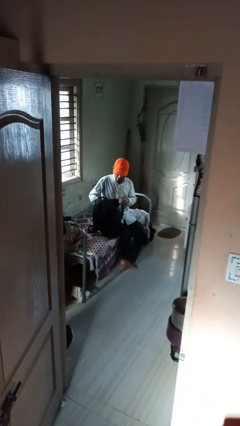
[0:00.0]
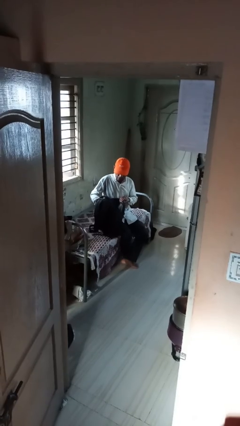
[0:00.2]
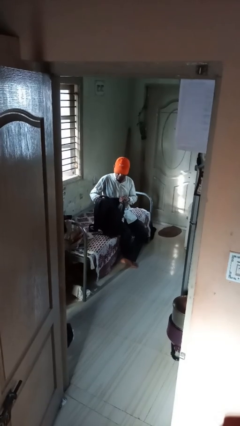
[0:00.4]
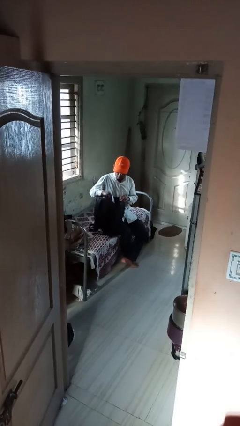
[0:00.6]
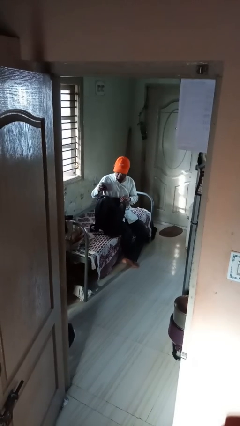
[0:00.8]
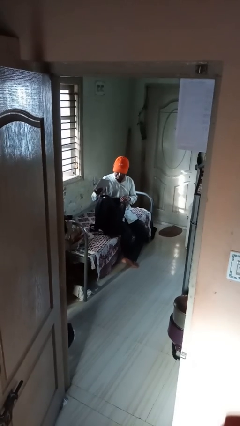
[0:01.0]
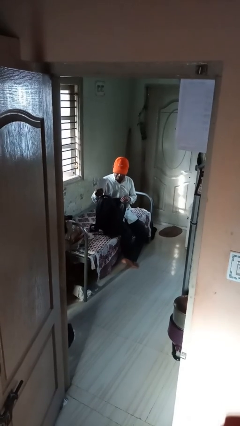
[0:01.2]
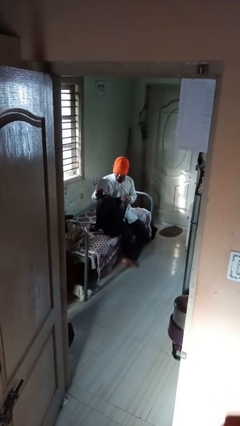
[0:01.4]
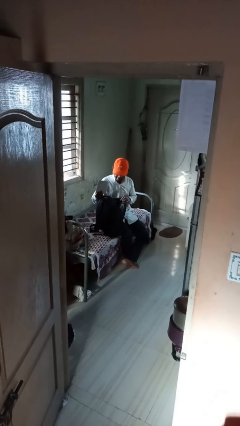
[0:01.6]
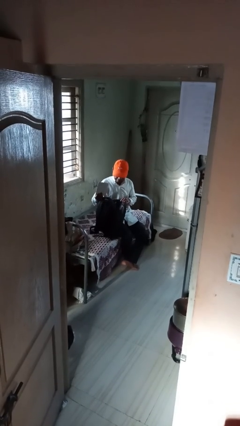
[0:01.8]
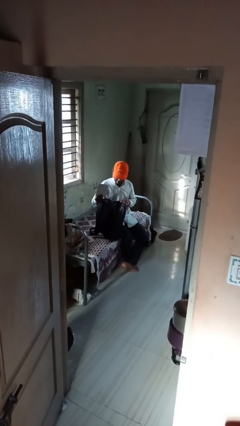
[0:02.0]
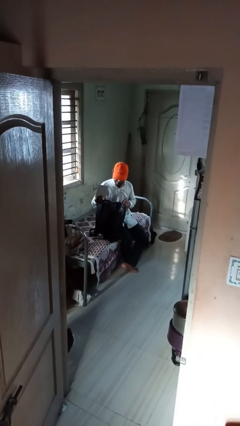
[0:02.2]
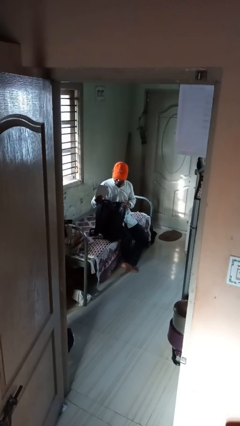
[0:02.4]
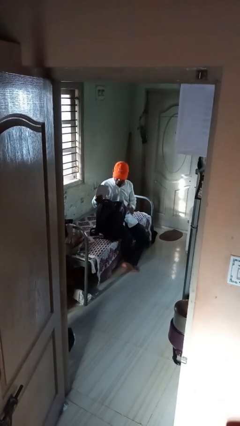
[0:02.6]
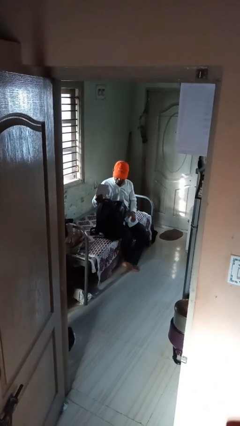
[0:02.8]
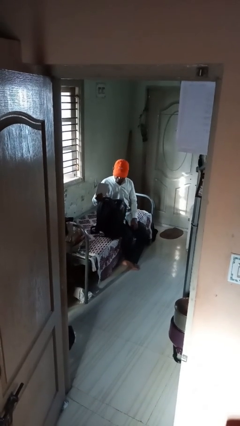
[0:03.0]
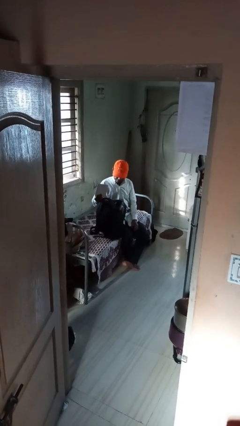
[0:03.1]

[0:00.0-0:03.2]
person takes object from backpack

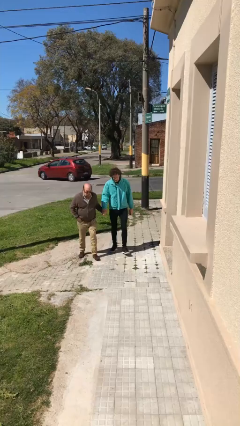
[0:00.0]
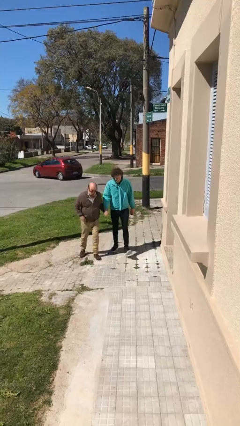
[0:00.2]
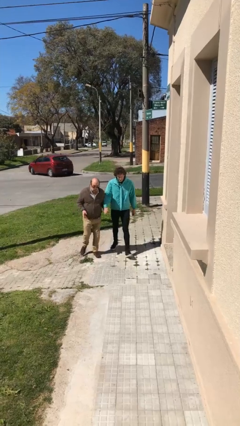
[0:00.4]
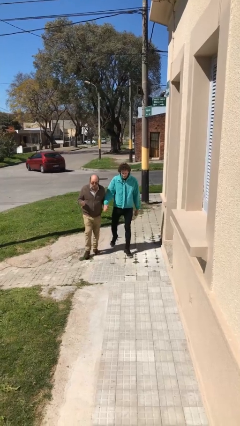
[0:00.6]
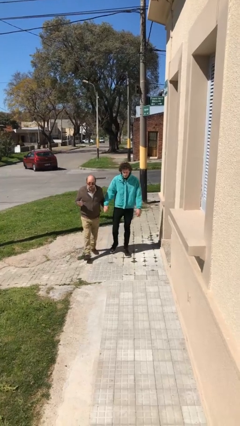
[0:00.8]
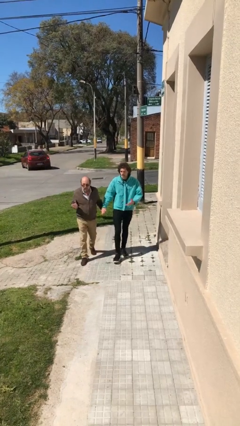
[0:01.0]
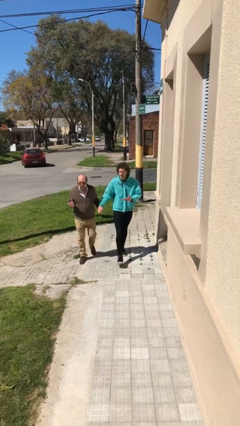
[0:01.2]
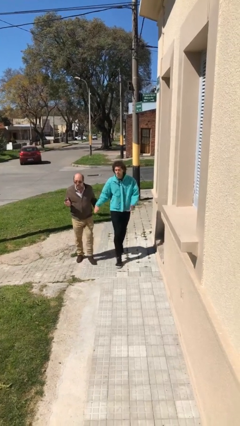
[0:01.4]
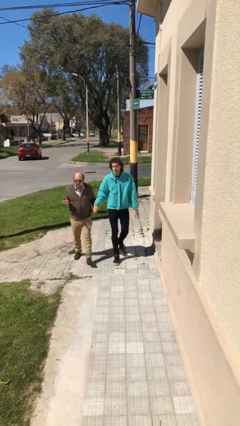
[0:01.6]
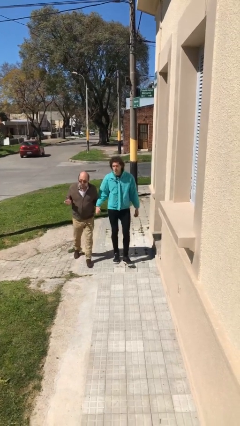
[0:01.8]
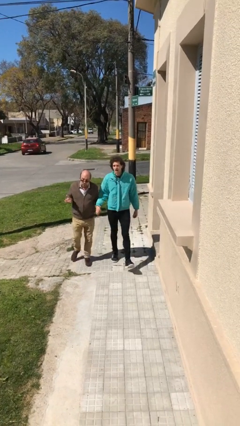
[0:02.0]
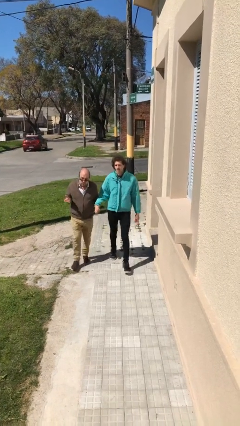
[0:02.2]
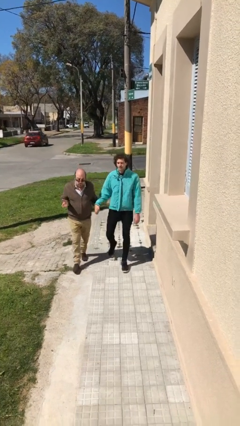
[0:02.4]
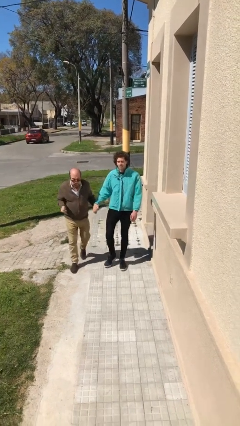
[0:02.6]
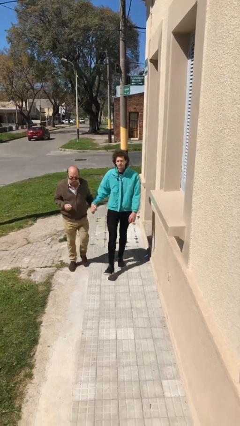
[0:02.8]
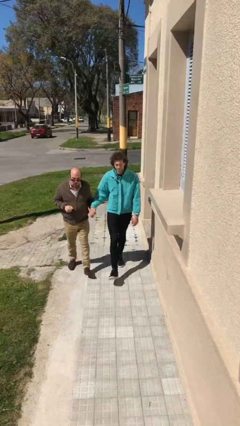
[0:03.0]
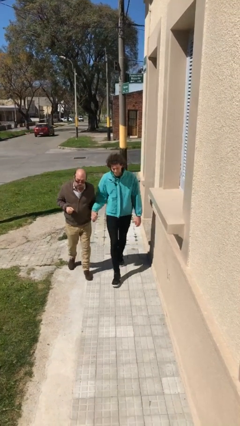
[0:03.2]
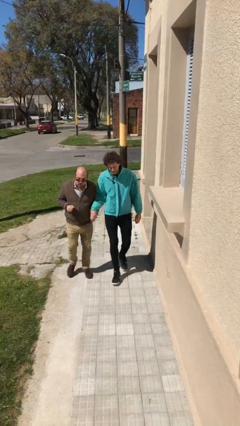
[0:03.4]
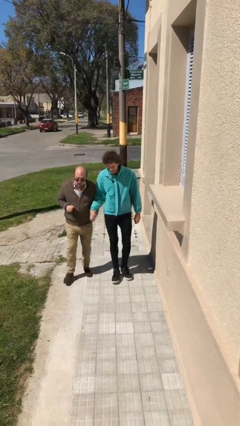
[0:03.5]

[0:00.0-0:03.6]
person holds hand

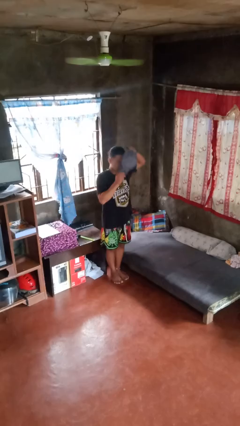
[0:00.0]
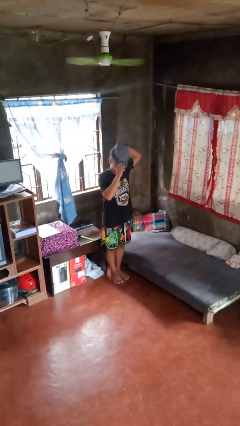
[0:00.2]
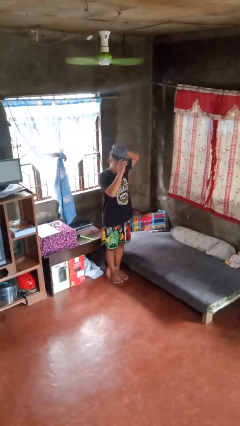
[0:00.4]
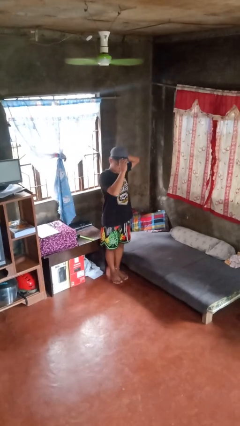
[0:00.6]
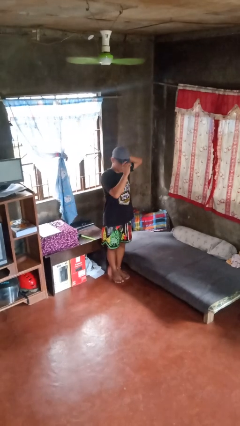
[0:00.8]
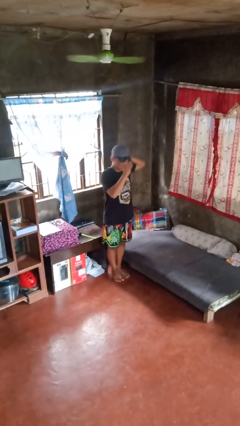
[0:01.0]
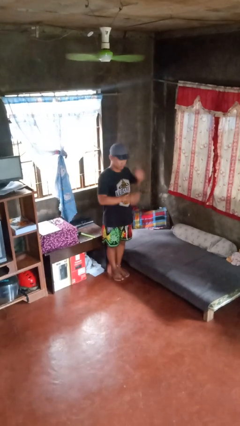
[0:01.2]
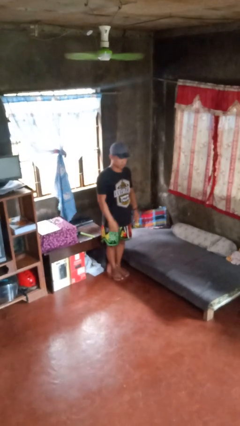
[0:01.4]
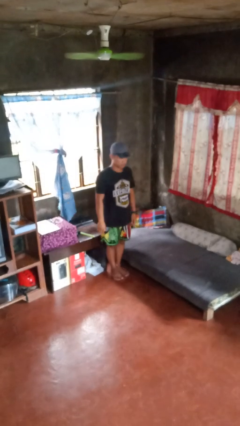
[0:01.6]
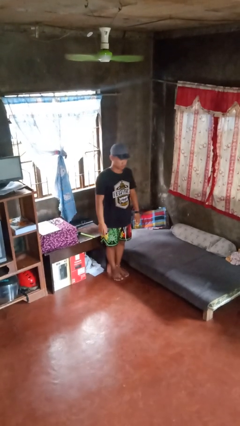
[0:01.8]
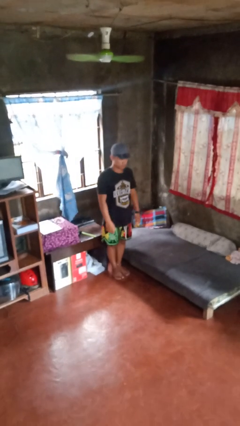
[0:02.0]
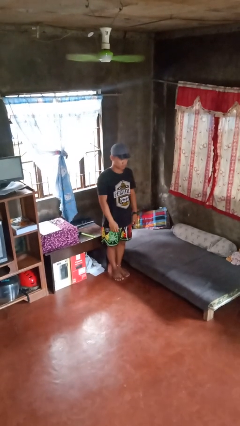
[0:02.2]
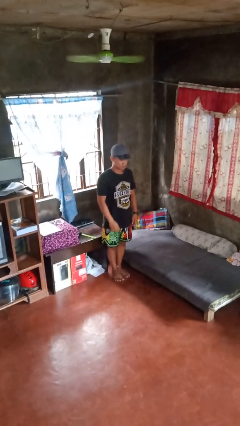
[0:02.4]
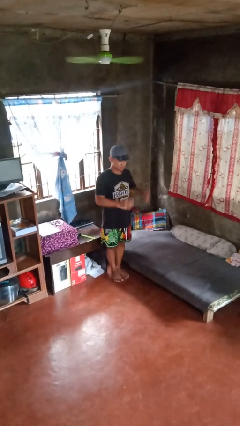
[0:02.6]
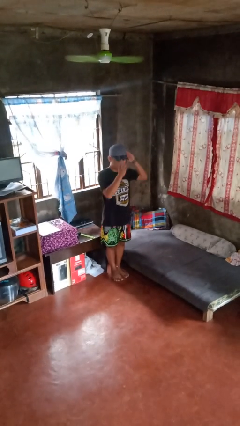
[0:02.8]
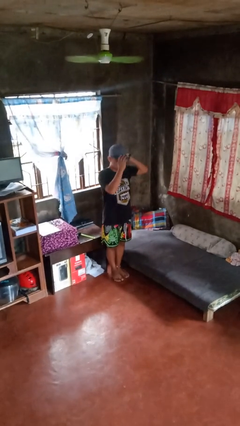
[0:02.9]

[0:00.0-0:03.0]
person puts on hat

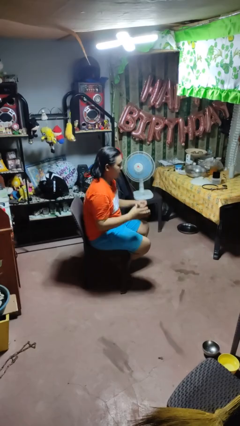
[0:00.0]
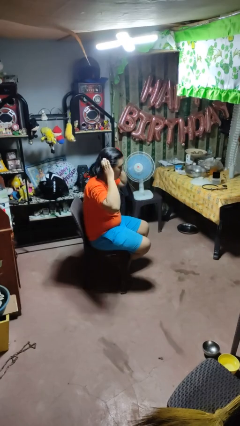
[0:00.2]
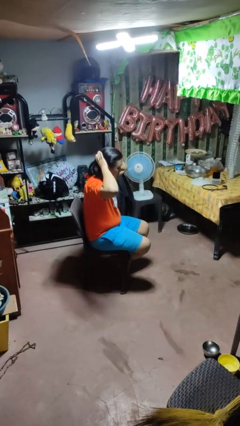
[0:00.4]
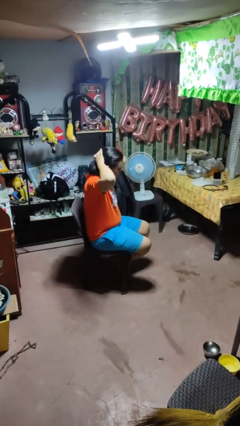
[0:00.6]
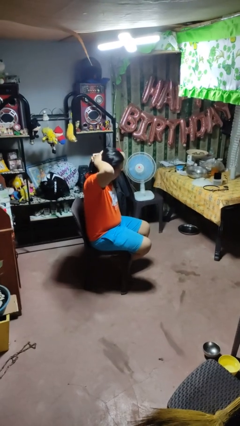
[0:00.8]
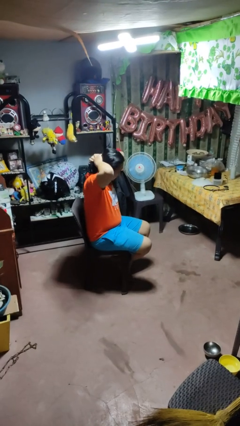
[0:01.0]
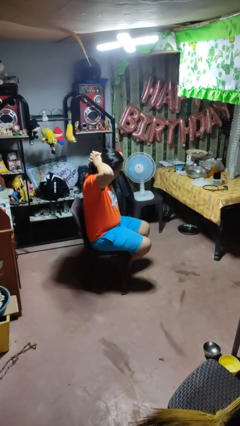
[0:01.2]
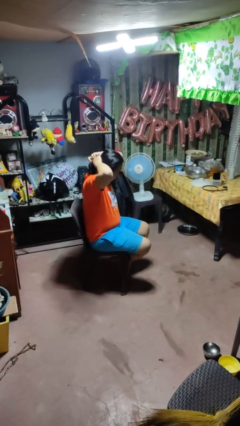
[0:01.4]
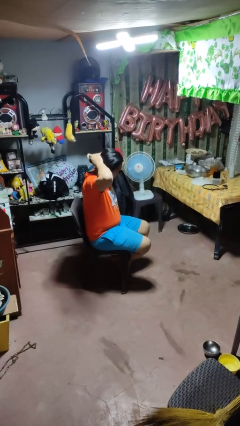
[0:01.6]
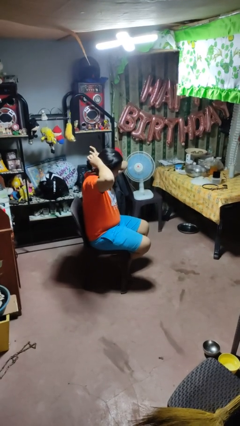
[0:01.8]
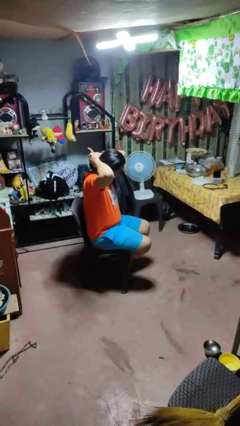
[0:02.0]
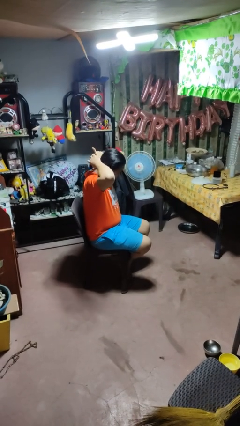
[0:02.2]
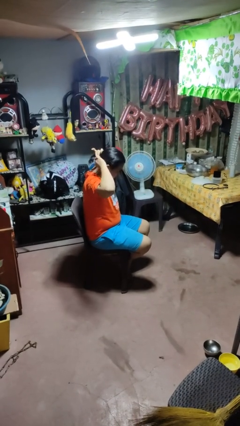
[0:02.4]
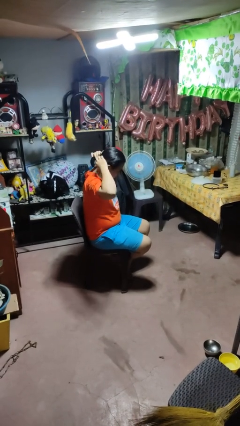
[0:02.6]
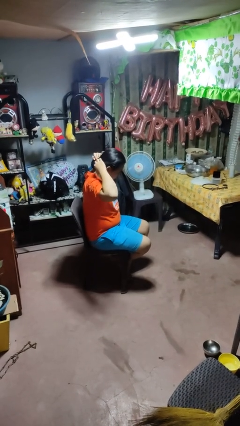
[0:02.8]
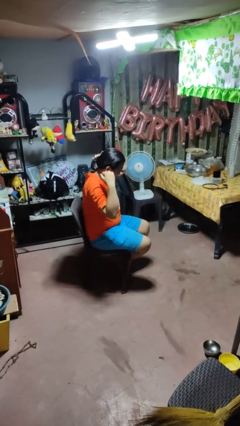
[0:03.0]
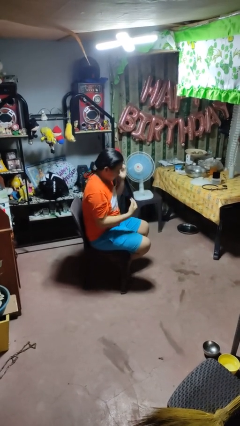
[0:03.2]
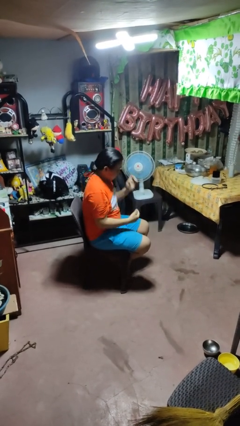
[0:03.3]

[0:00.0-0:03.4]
person puts hair in ponytail

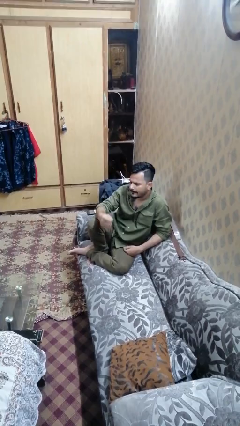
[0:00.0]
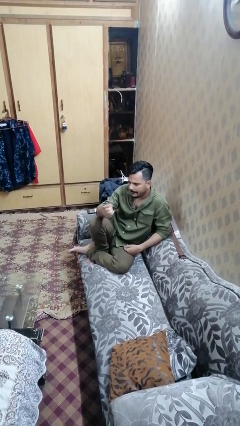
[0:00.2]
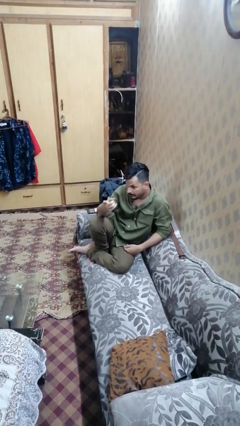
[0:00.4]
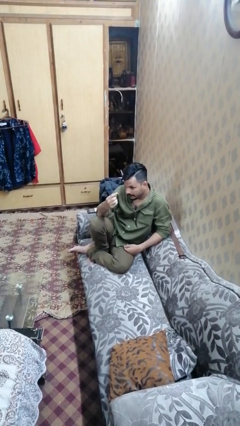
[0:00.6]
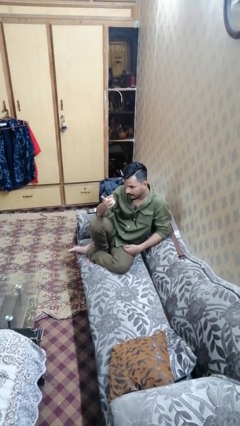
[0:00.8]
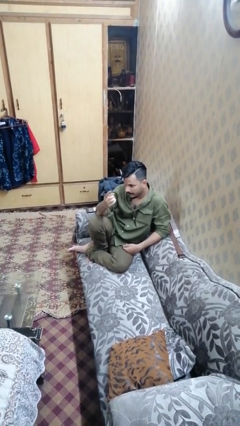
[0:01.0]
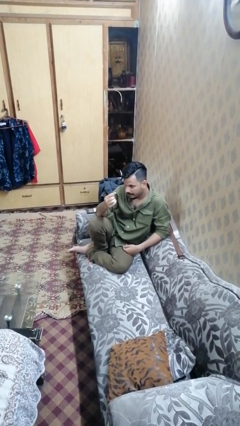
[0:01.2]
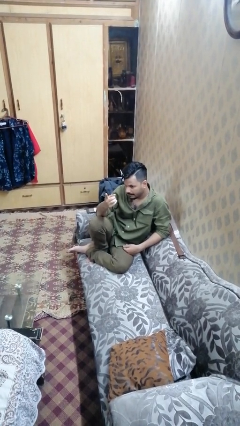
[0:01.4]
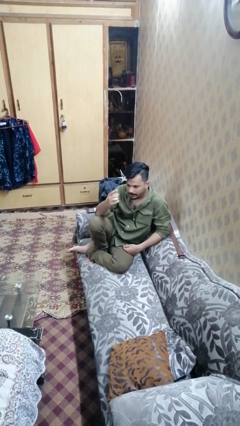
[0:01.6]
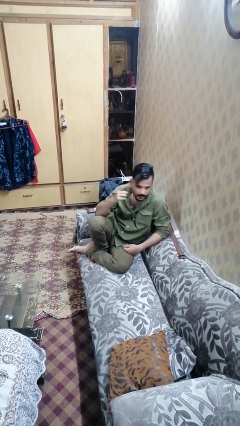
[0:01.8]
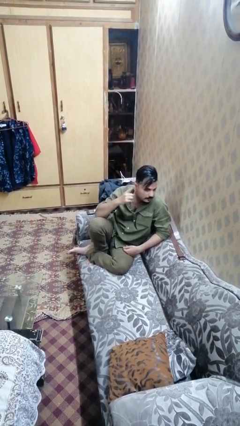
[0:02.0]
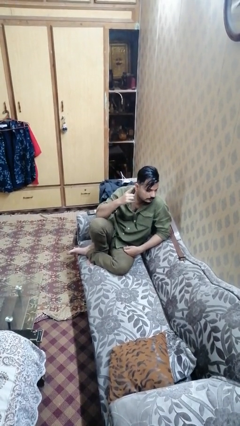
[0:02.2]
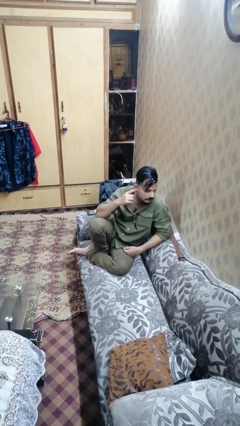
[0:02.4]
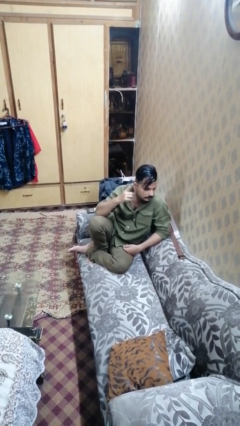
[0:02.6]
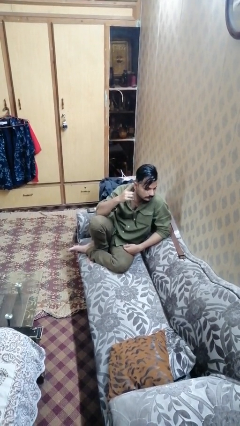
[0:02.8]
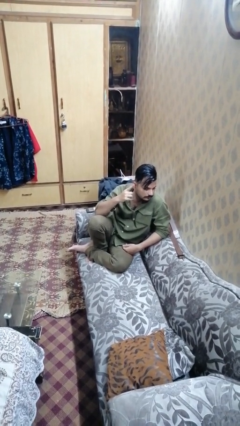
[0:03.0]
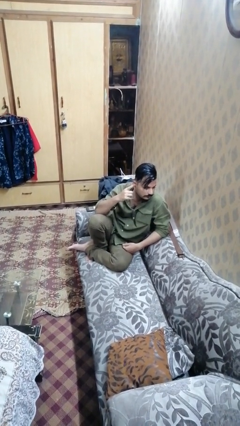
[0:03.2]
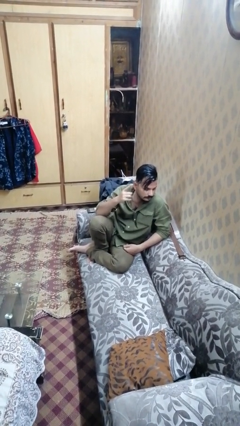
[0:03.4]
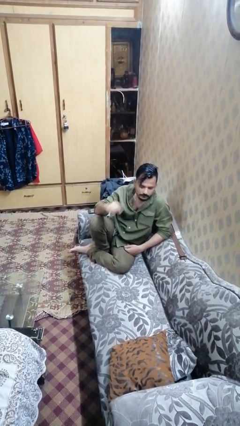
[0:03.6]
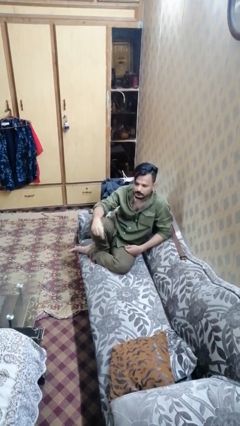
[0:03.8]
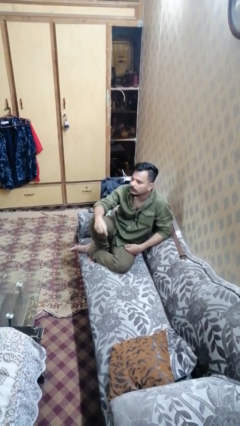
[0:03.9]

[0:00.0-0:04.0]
person gestures listen closely

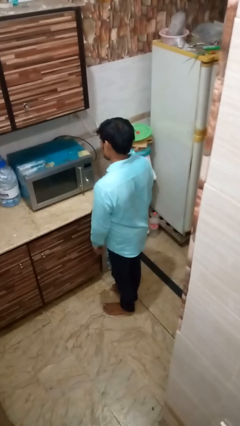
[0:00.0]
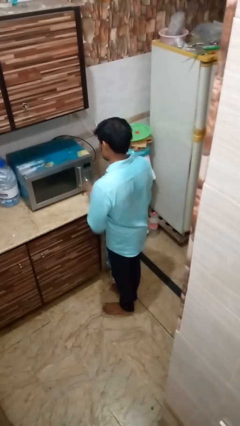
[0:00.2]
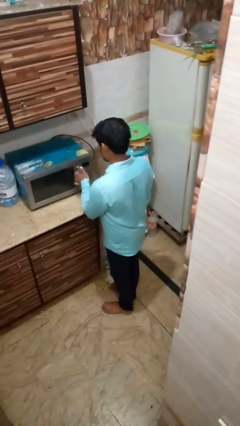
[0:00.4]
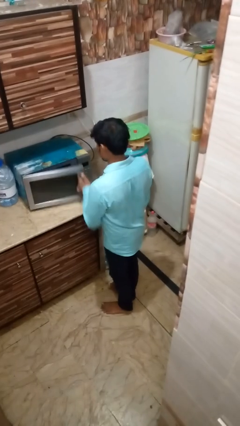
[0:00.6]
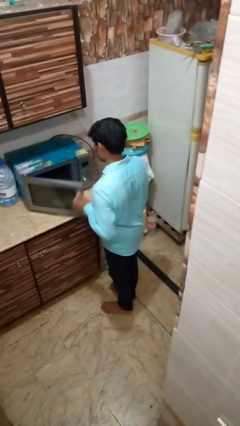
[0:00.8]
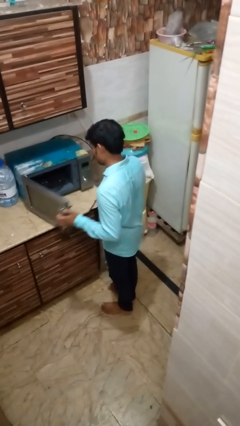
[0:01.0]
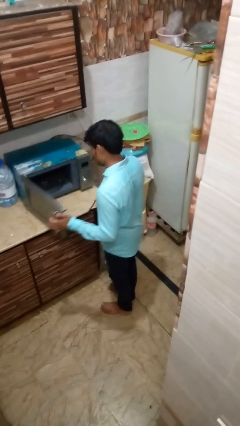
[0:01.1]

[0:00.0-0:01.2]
person opens oven door
